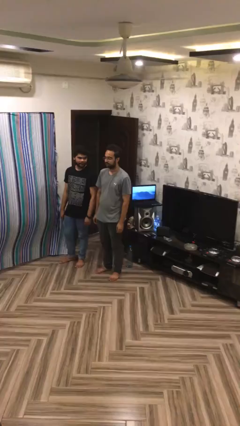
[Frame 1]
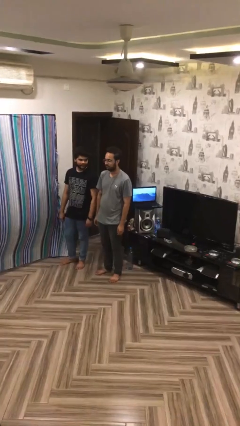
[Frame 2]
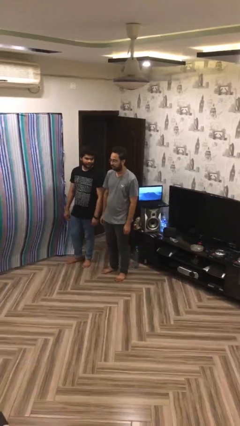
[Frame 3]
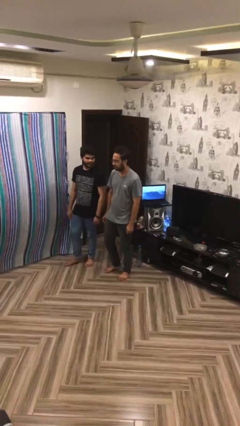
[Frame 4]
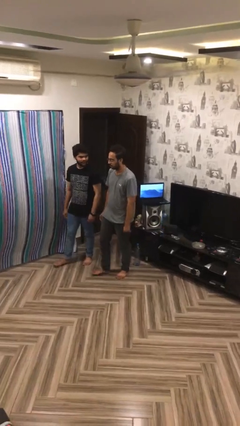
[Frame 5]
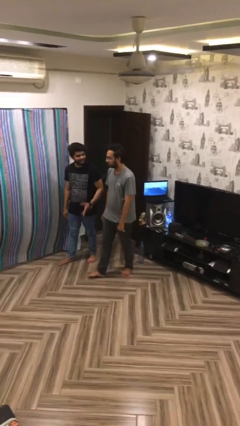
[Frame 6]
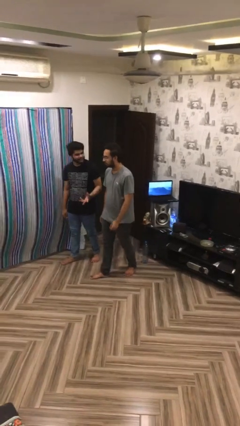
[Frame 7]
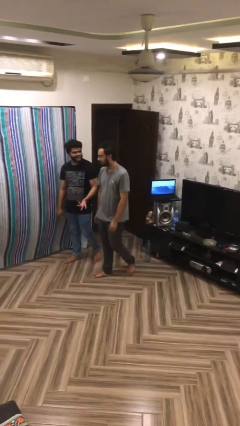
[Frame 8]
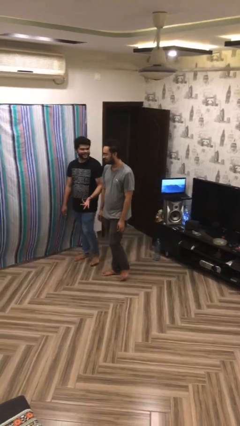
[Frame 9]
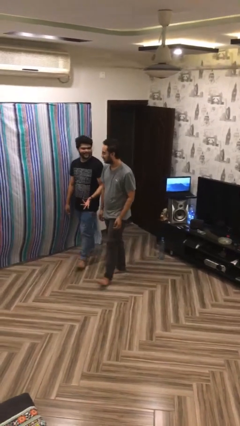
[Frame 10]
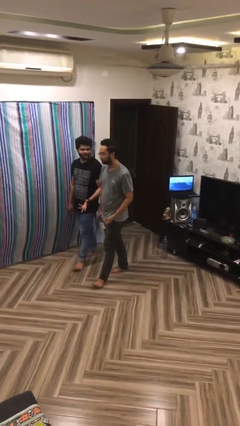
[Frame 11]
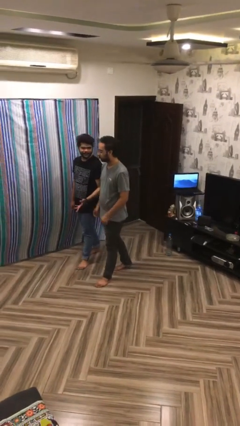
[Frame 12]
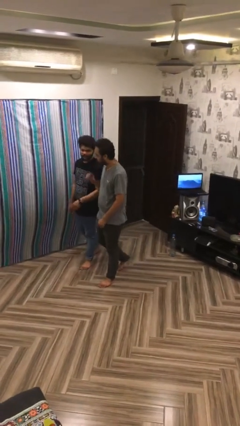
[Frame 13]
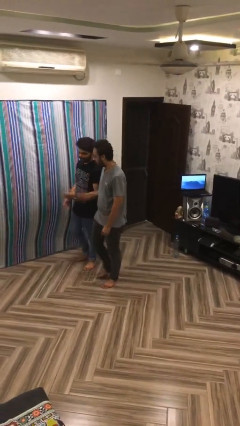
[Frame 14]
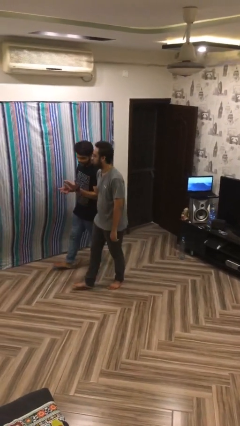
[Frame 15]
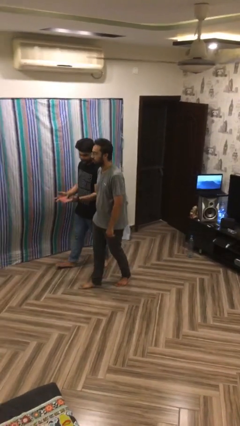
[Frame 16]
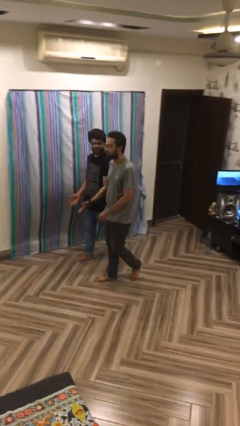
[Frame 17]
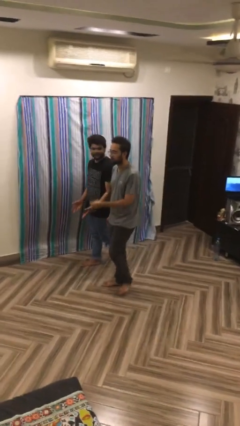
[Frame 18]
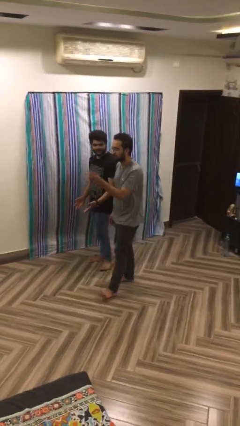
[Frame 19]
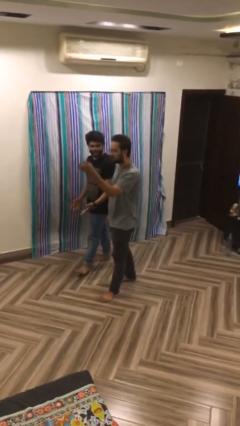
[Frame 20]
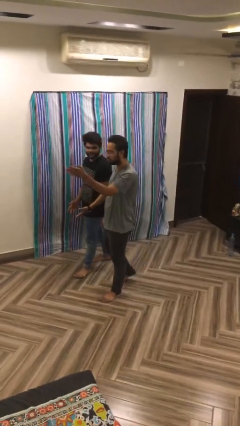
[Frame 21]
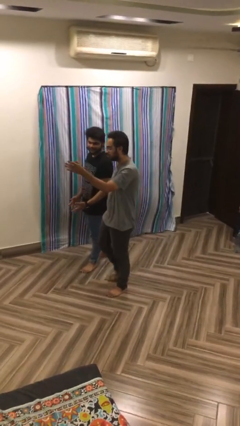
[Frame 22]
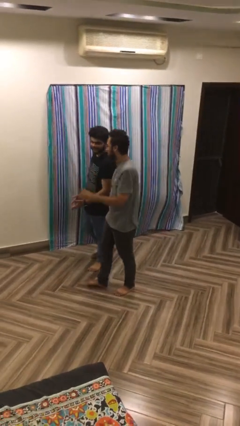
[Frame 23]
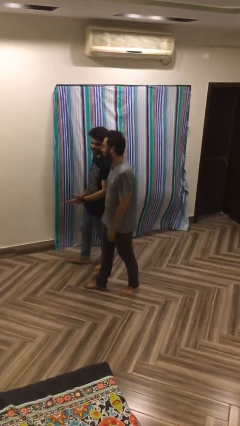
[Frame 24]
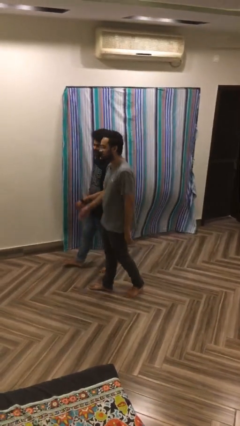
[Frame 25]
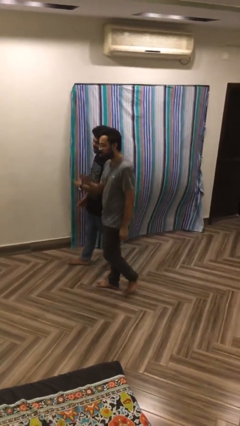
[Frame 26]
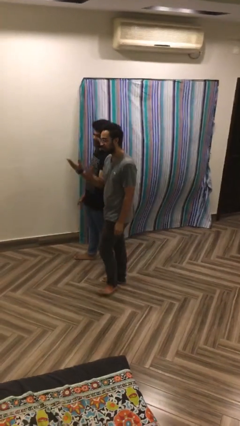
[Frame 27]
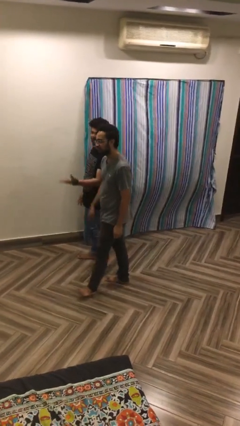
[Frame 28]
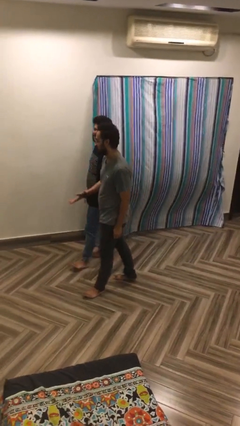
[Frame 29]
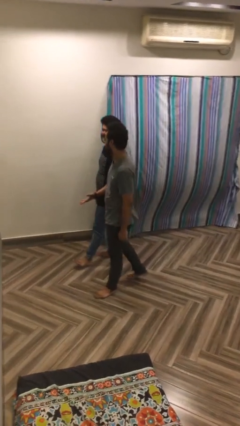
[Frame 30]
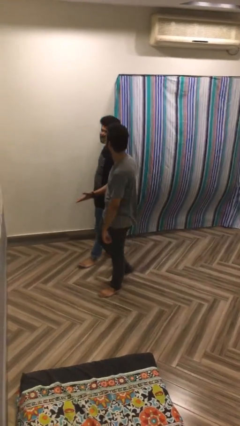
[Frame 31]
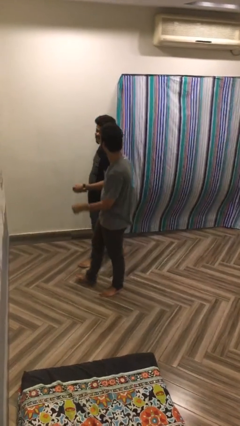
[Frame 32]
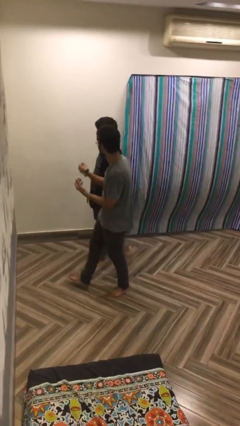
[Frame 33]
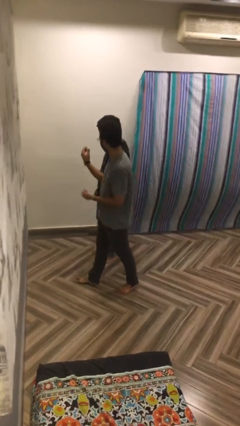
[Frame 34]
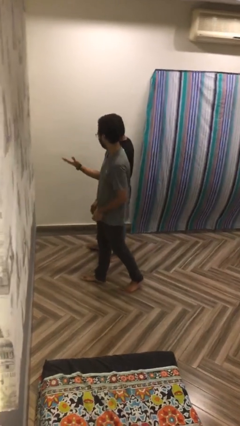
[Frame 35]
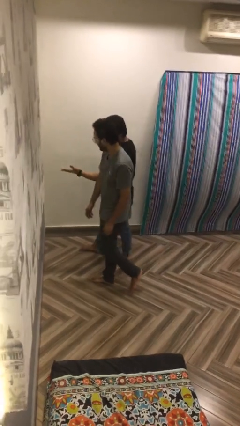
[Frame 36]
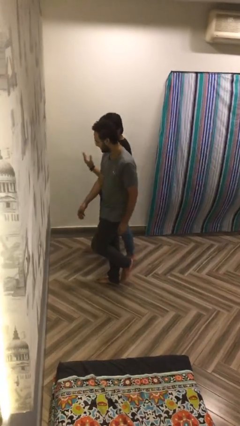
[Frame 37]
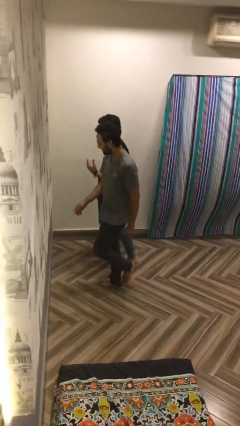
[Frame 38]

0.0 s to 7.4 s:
person talks to person

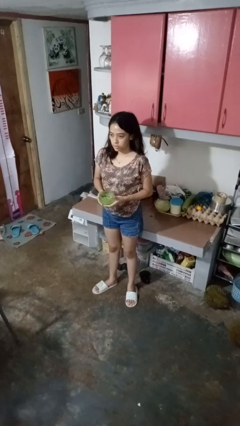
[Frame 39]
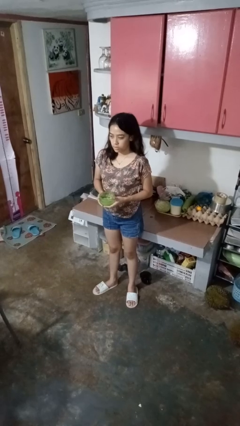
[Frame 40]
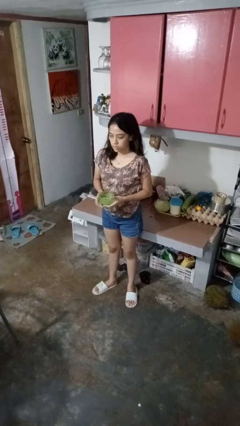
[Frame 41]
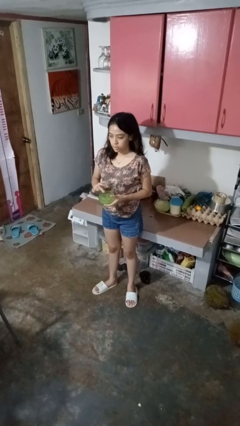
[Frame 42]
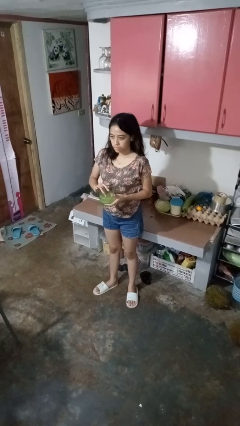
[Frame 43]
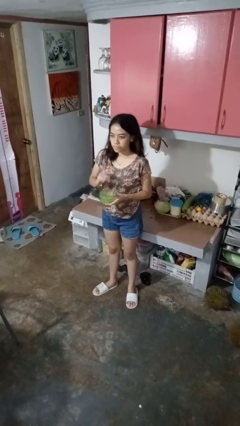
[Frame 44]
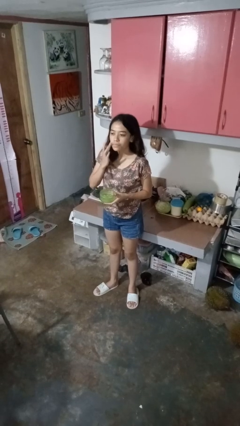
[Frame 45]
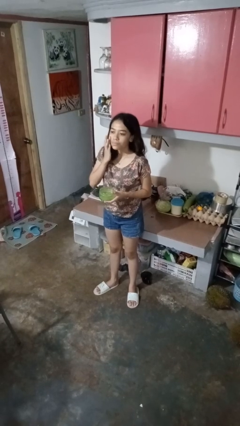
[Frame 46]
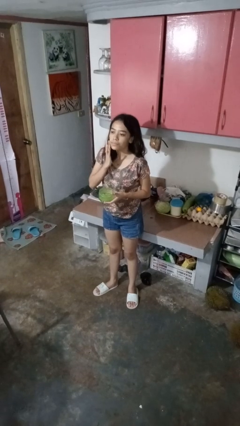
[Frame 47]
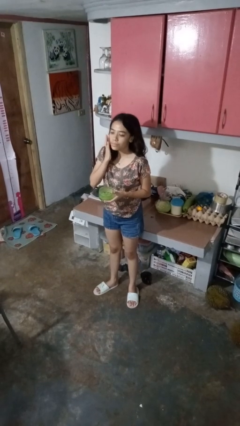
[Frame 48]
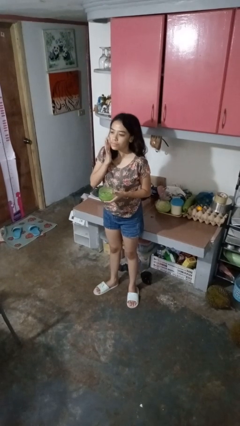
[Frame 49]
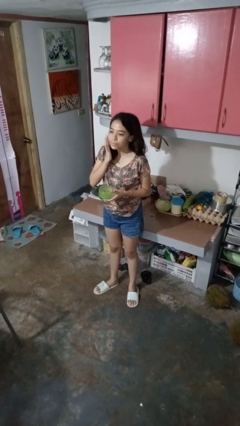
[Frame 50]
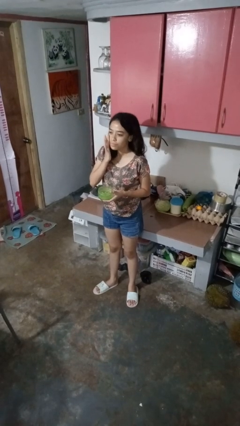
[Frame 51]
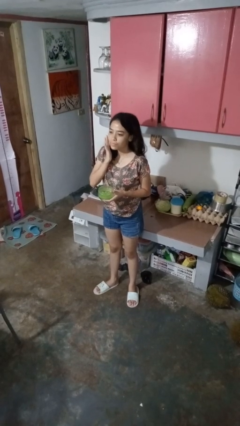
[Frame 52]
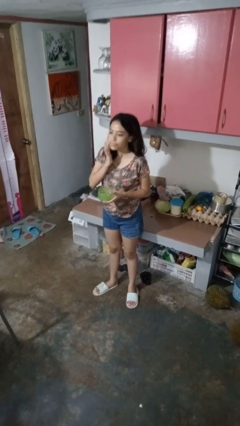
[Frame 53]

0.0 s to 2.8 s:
person applies facial moisturizer

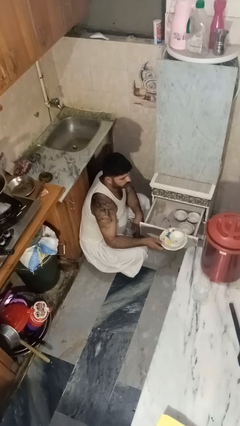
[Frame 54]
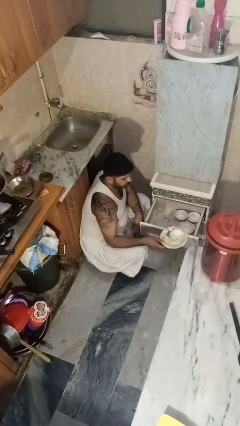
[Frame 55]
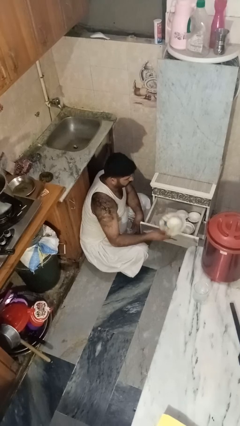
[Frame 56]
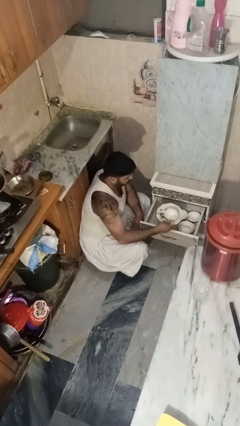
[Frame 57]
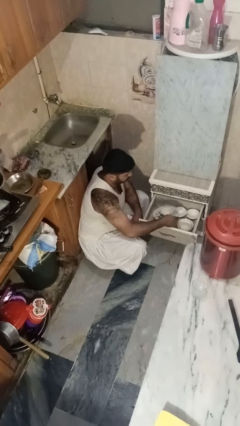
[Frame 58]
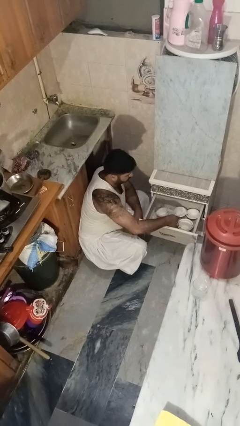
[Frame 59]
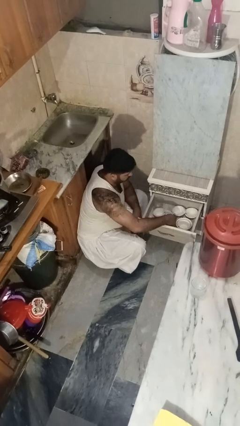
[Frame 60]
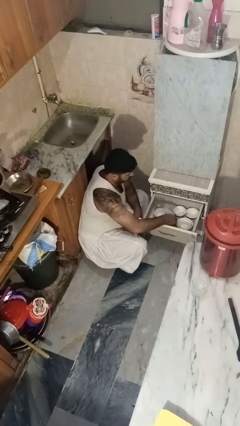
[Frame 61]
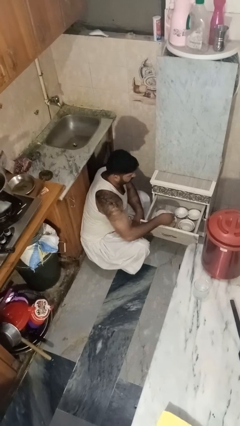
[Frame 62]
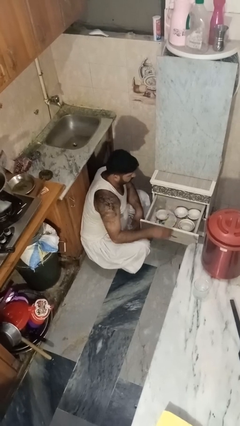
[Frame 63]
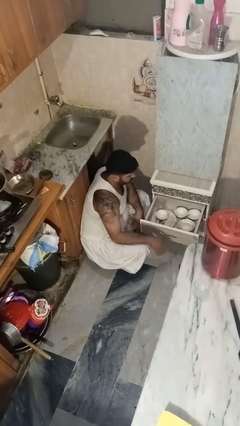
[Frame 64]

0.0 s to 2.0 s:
person puts object into kitchen drawer

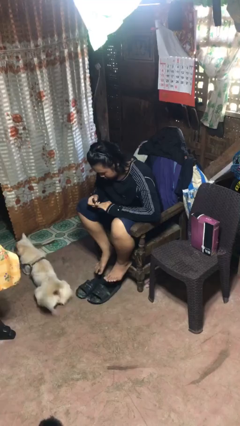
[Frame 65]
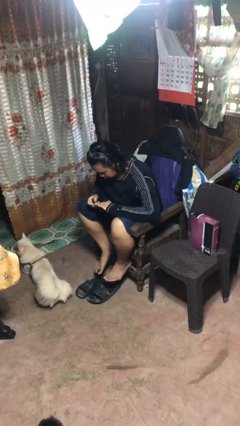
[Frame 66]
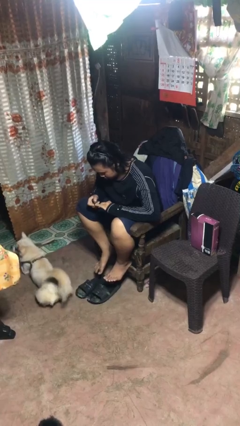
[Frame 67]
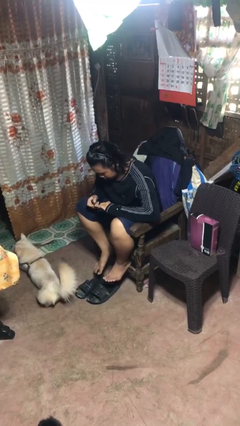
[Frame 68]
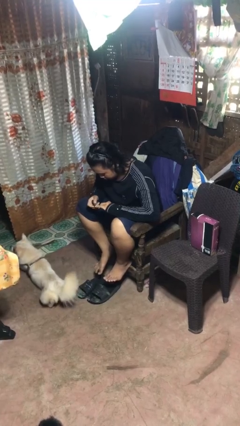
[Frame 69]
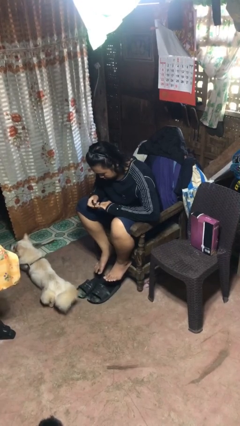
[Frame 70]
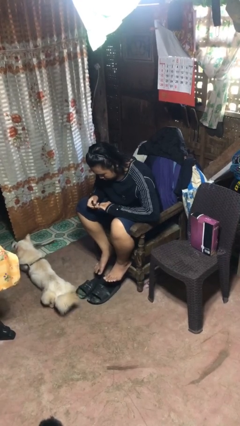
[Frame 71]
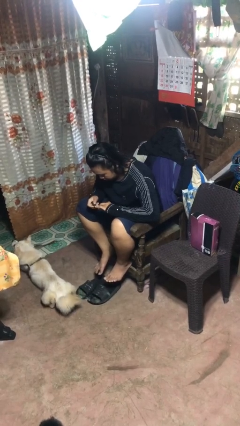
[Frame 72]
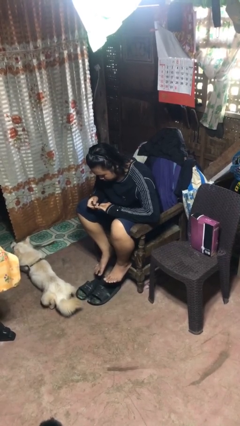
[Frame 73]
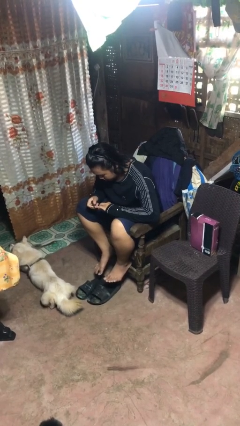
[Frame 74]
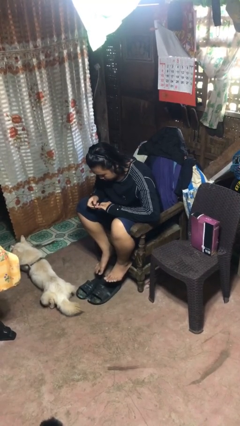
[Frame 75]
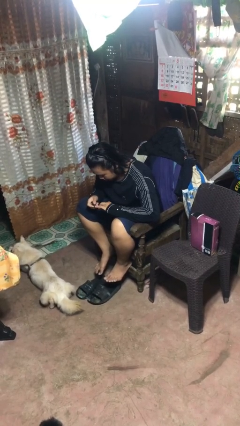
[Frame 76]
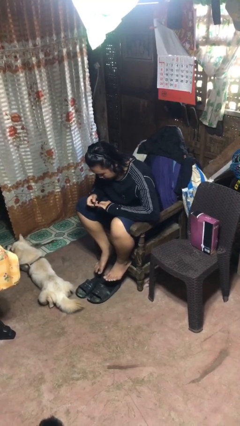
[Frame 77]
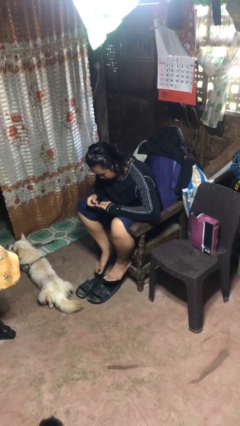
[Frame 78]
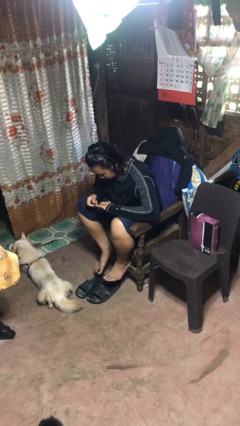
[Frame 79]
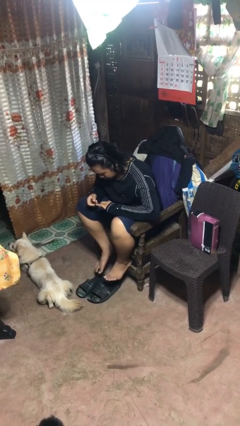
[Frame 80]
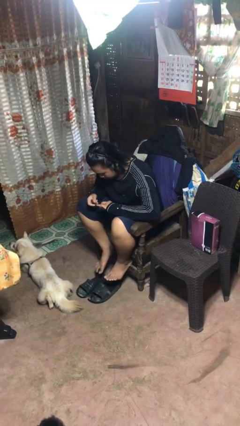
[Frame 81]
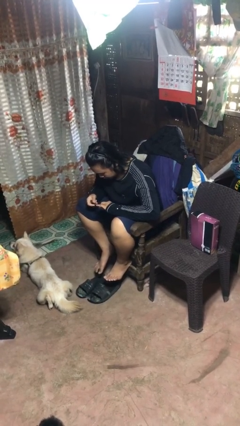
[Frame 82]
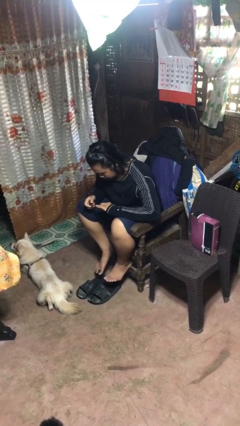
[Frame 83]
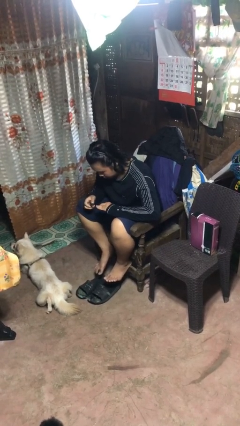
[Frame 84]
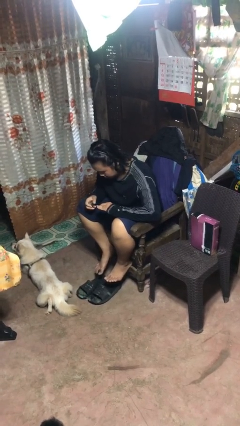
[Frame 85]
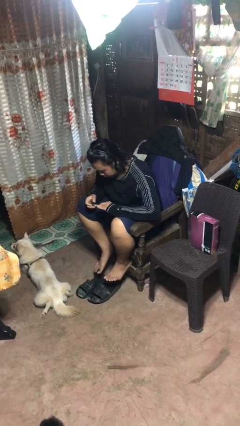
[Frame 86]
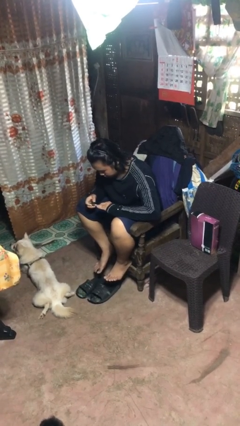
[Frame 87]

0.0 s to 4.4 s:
person clips fingernails

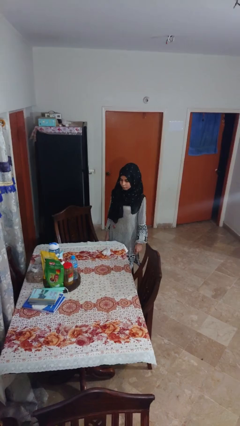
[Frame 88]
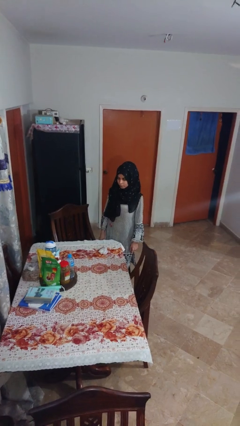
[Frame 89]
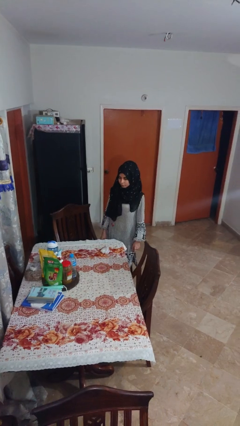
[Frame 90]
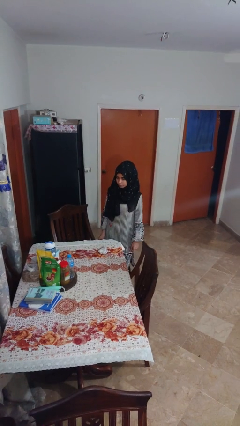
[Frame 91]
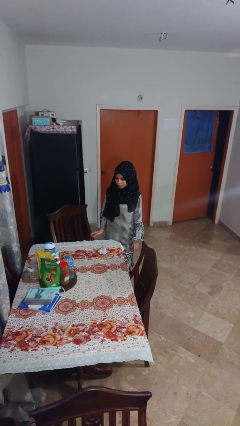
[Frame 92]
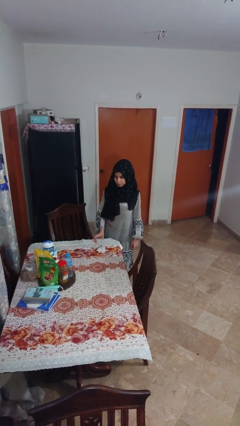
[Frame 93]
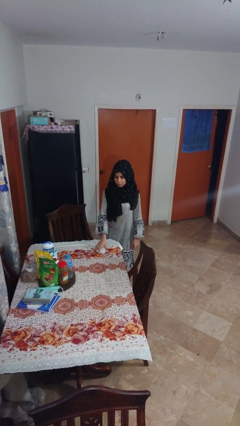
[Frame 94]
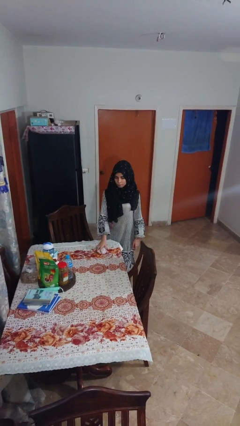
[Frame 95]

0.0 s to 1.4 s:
person picks up object from table
